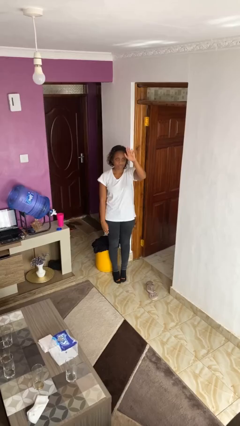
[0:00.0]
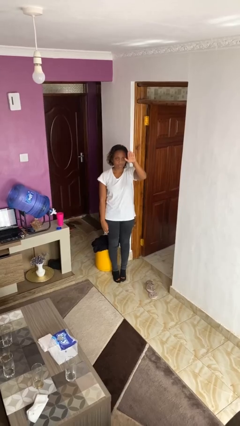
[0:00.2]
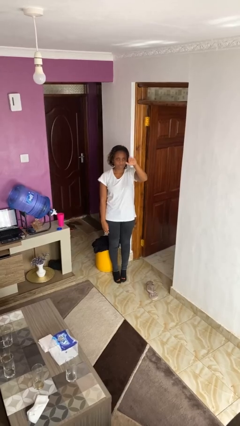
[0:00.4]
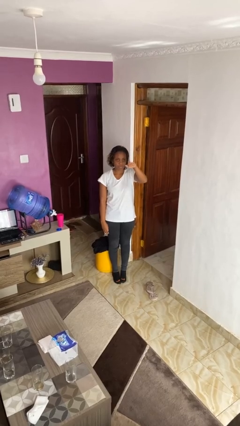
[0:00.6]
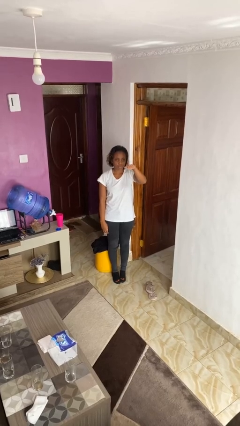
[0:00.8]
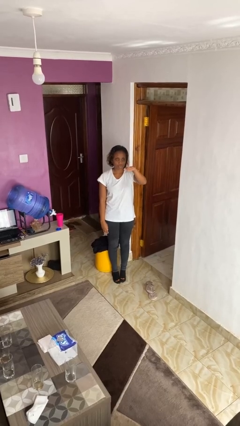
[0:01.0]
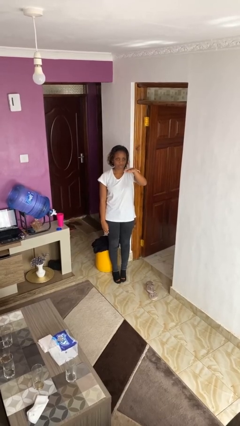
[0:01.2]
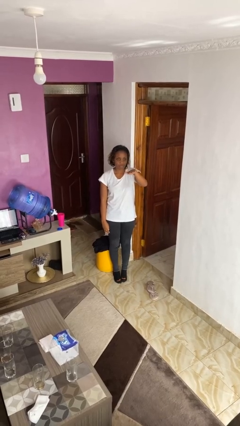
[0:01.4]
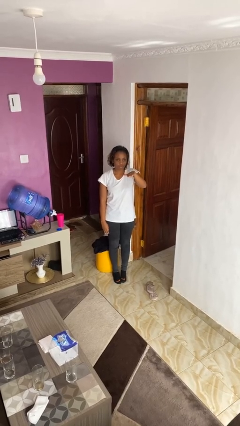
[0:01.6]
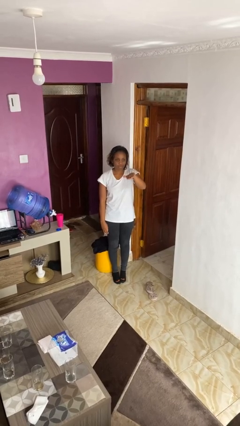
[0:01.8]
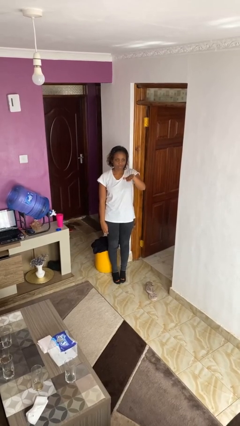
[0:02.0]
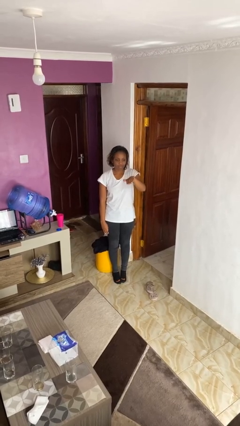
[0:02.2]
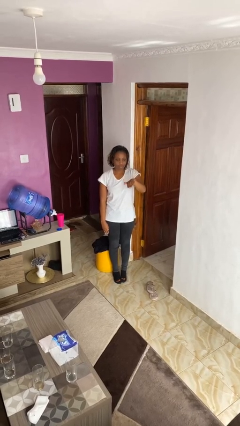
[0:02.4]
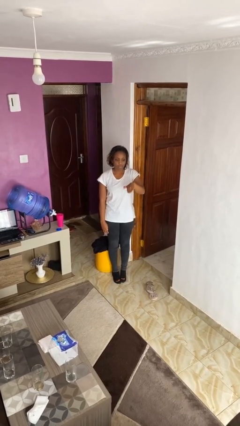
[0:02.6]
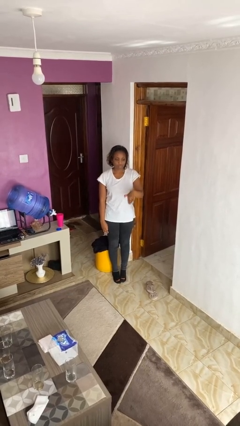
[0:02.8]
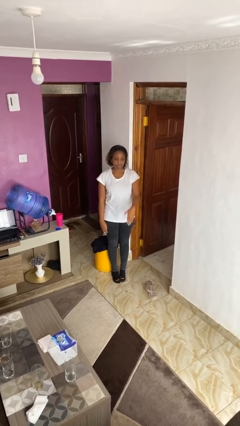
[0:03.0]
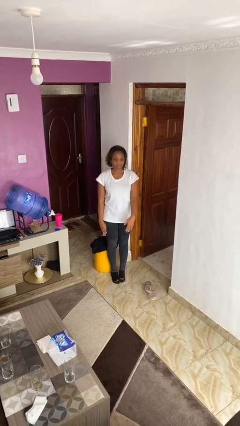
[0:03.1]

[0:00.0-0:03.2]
person gestures swipe down

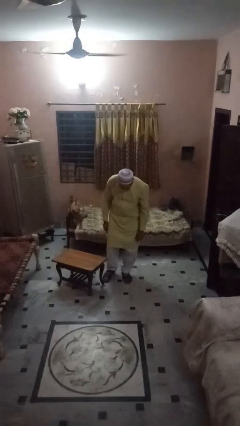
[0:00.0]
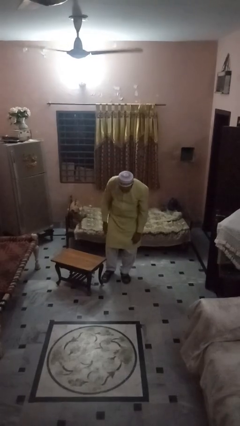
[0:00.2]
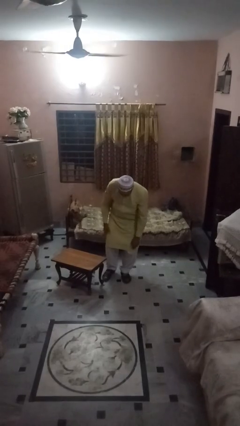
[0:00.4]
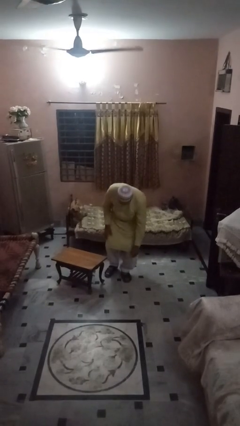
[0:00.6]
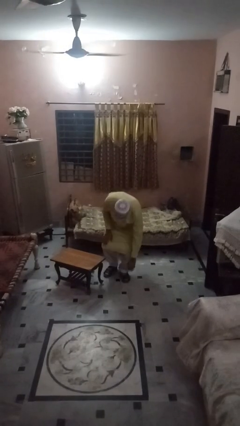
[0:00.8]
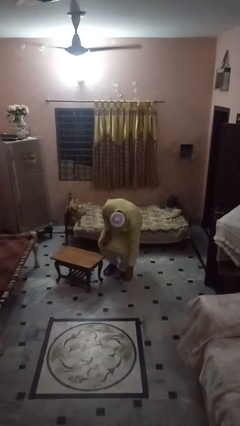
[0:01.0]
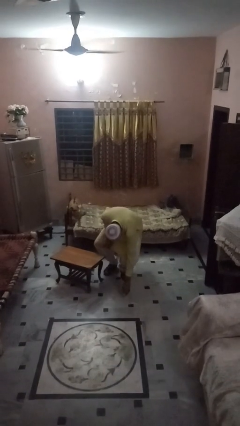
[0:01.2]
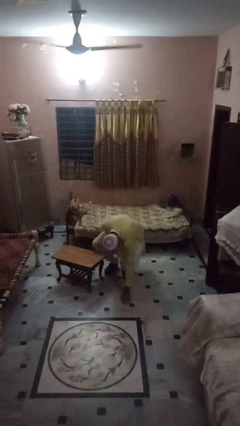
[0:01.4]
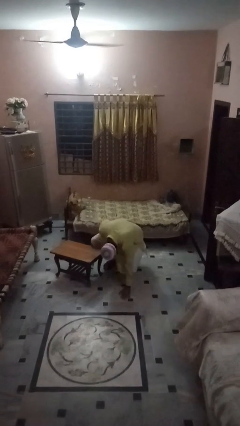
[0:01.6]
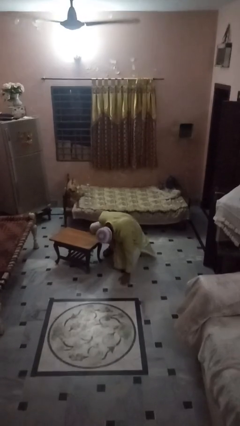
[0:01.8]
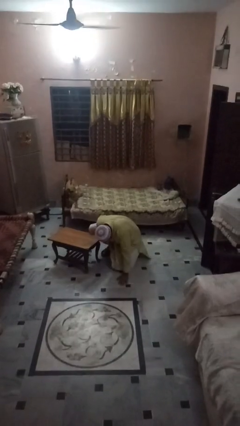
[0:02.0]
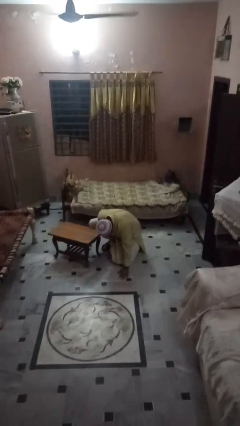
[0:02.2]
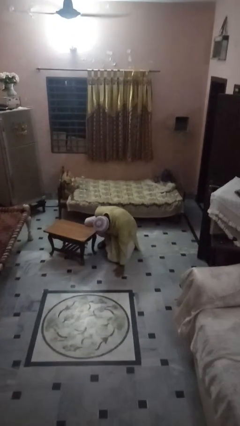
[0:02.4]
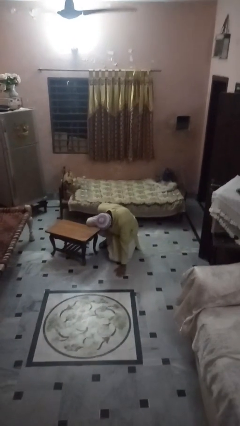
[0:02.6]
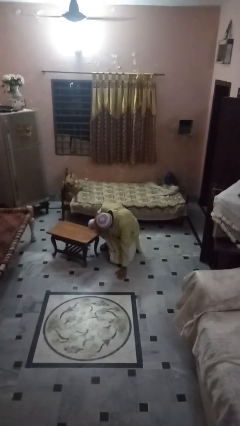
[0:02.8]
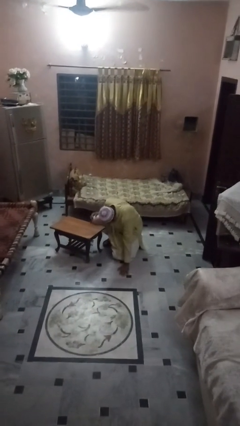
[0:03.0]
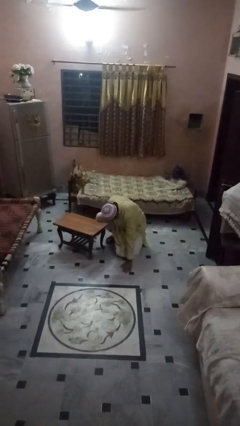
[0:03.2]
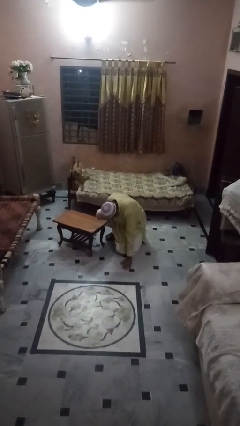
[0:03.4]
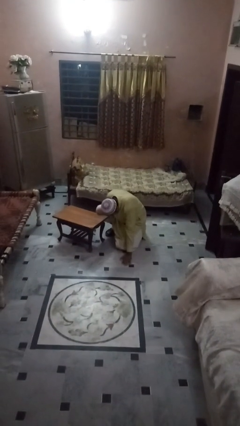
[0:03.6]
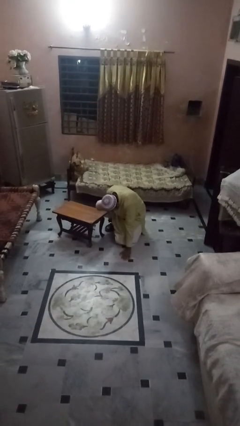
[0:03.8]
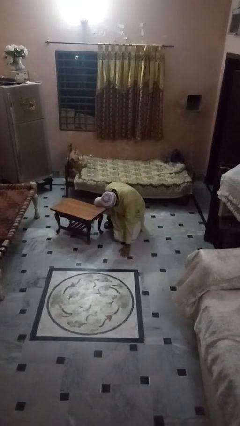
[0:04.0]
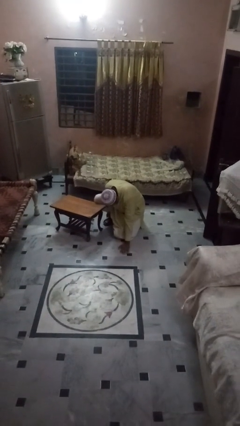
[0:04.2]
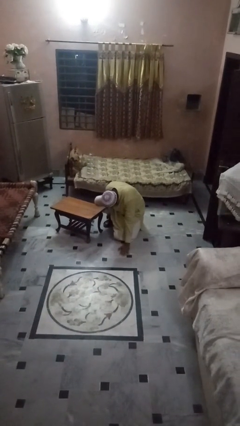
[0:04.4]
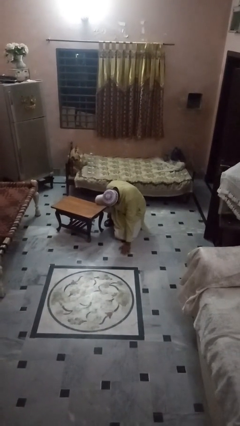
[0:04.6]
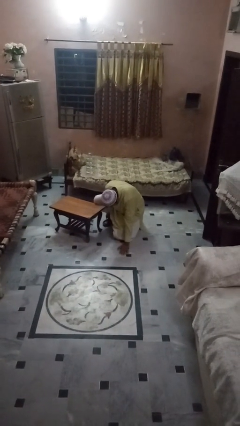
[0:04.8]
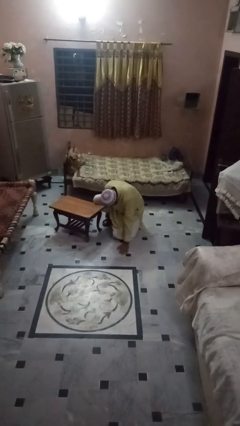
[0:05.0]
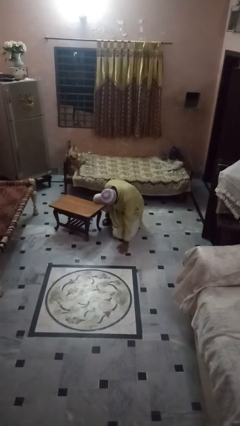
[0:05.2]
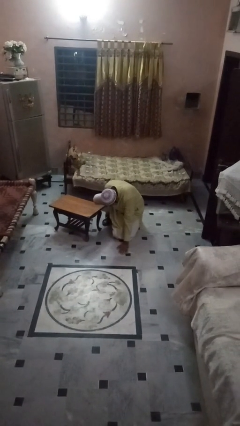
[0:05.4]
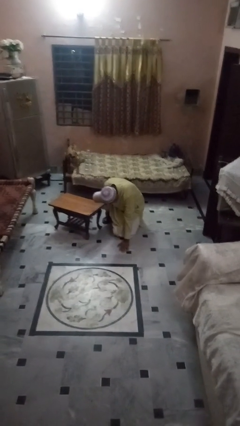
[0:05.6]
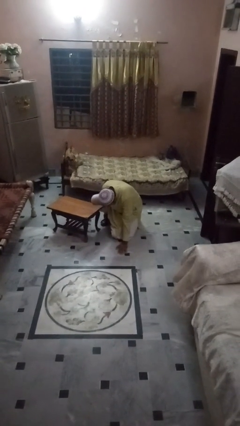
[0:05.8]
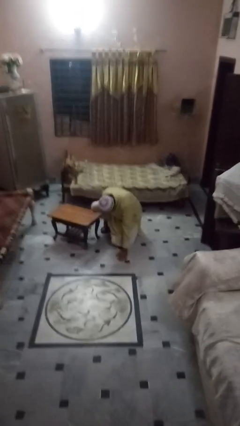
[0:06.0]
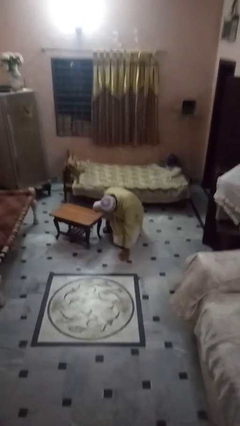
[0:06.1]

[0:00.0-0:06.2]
person lies down on floor

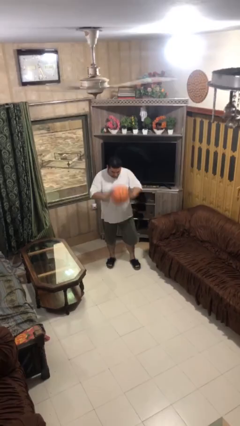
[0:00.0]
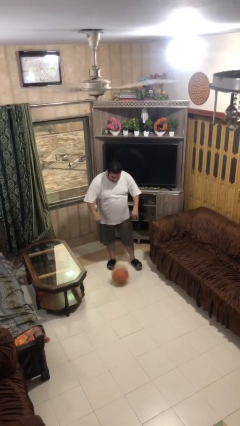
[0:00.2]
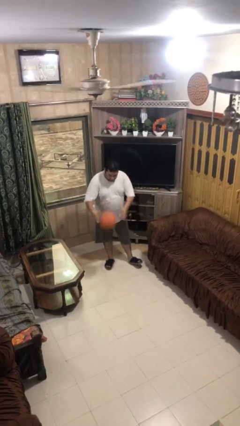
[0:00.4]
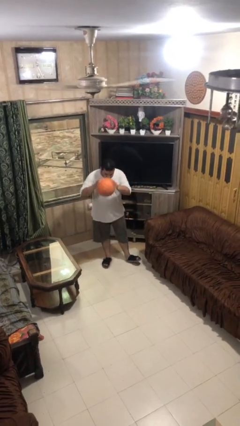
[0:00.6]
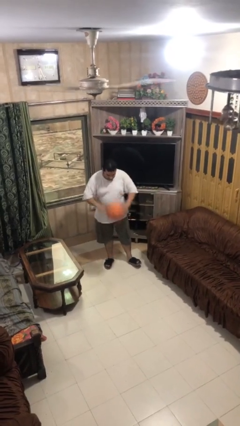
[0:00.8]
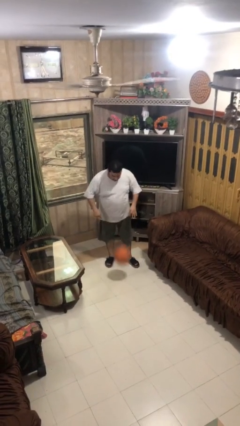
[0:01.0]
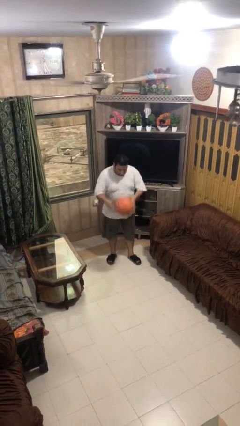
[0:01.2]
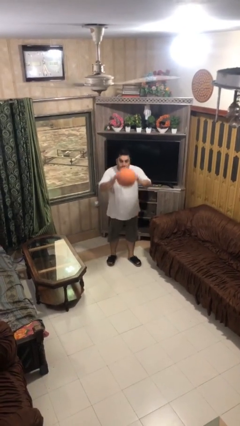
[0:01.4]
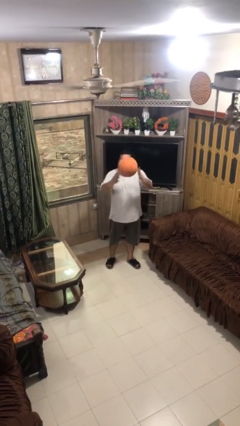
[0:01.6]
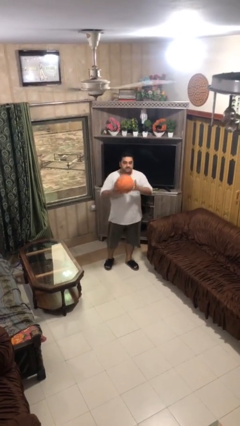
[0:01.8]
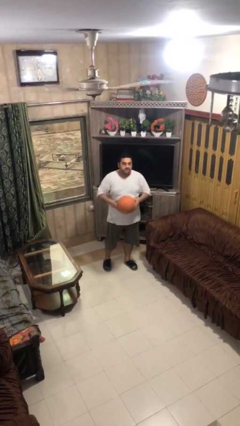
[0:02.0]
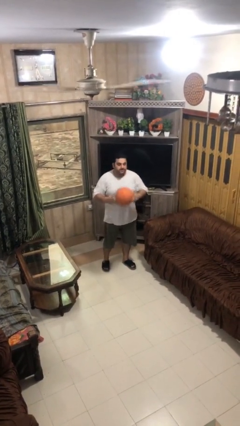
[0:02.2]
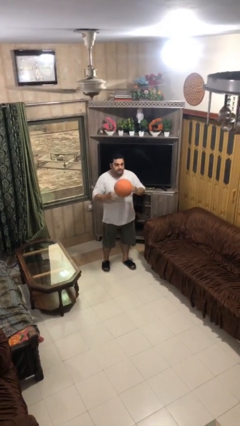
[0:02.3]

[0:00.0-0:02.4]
person bounces ball on floor

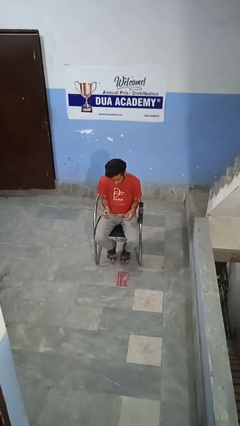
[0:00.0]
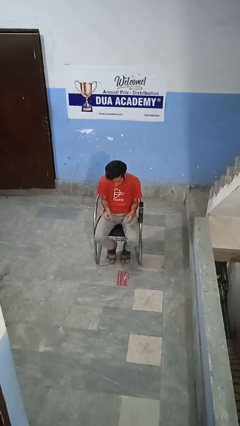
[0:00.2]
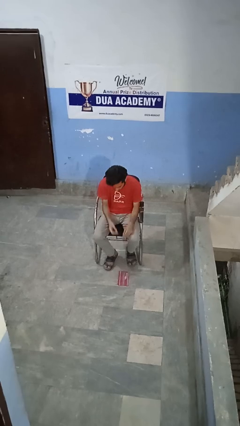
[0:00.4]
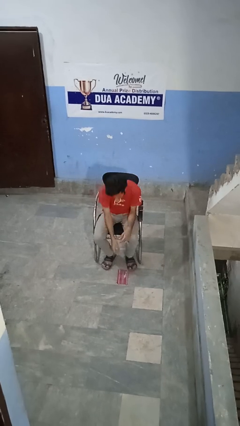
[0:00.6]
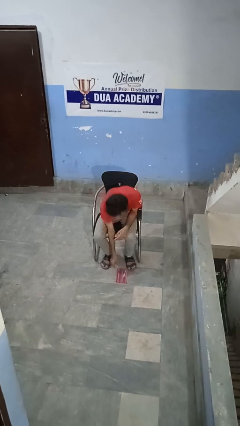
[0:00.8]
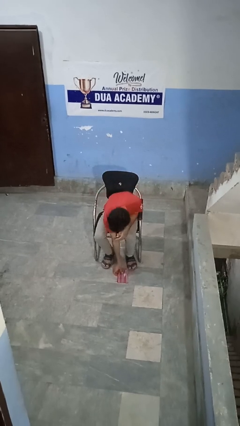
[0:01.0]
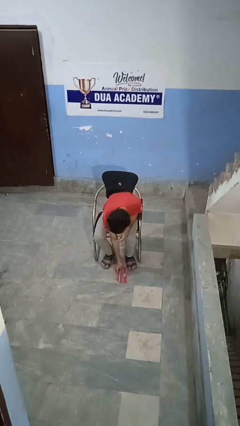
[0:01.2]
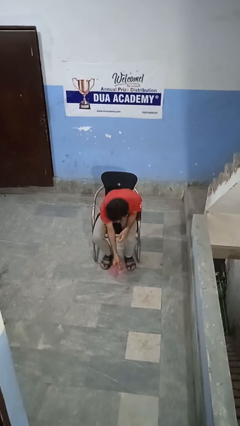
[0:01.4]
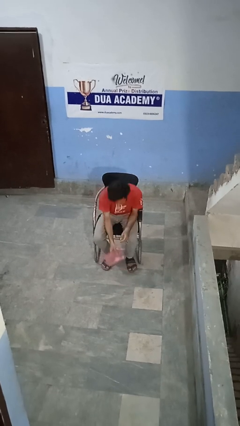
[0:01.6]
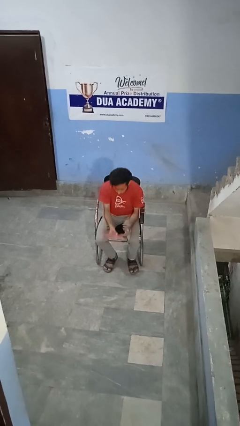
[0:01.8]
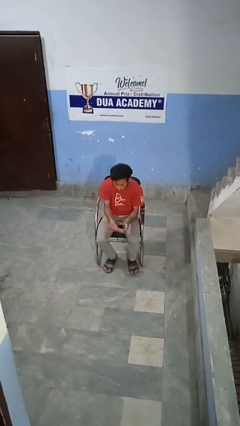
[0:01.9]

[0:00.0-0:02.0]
person picks up object from floor

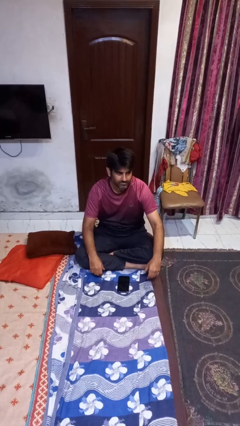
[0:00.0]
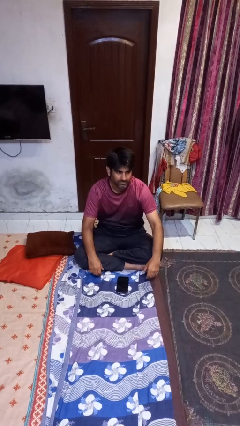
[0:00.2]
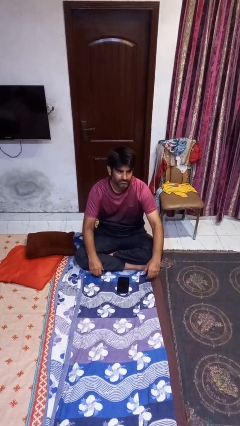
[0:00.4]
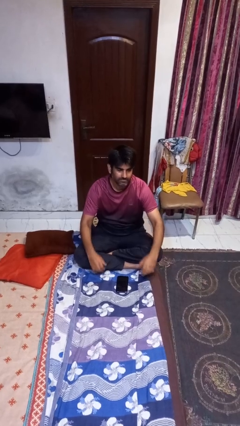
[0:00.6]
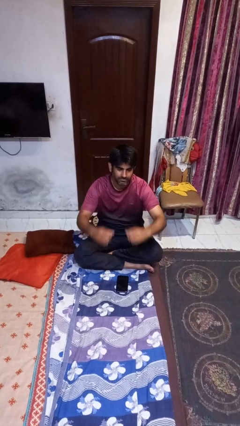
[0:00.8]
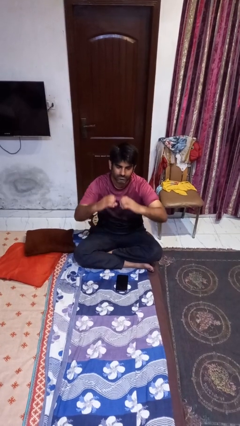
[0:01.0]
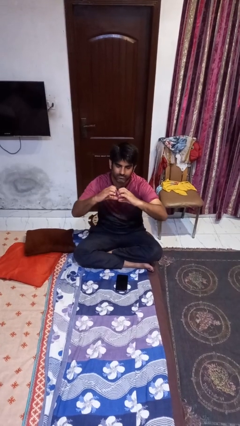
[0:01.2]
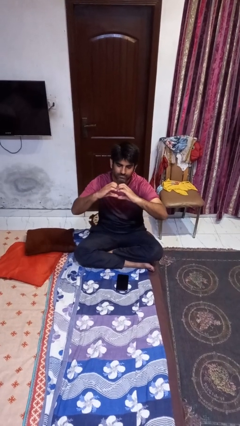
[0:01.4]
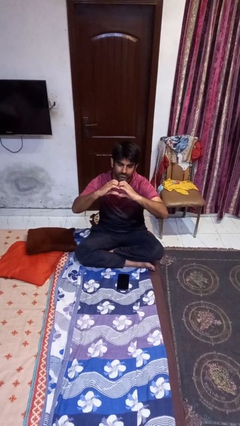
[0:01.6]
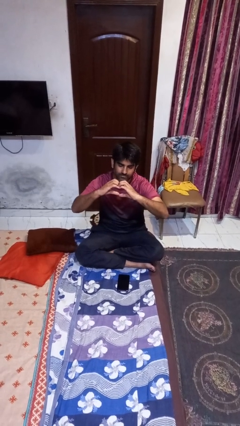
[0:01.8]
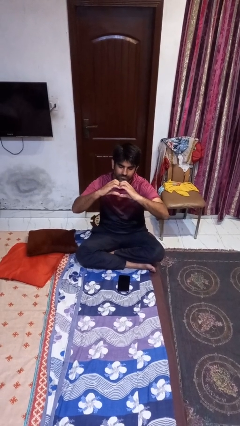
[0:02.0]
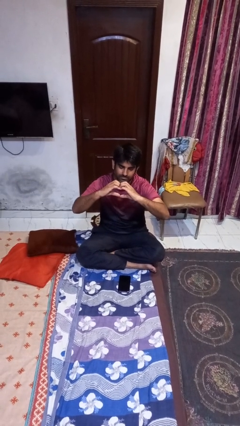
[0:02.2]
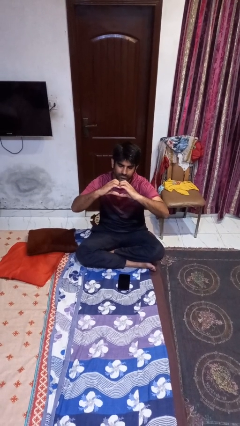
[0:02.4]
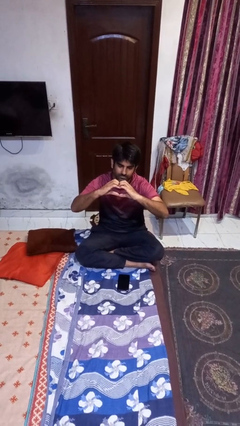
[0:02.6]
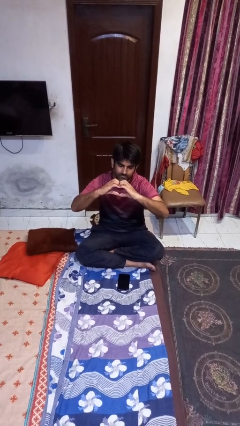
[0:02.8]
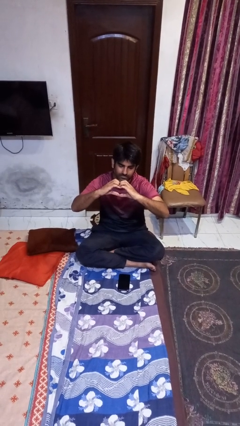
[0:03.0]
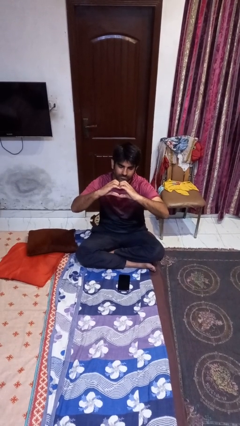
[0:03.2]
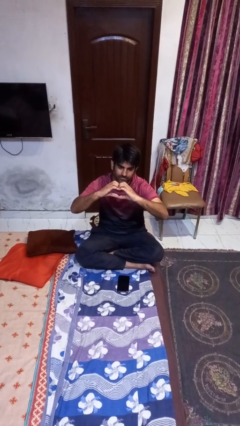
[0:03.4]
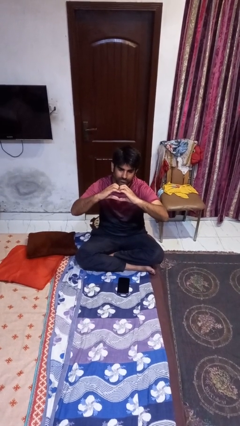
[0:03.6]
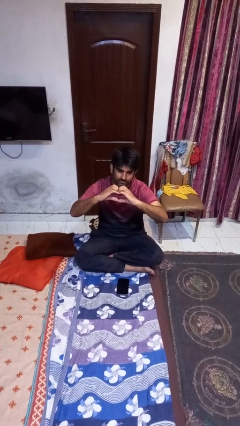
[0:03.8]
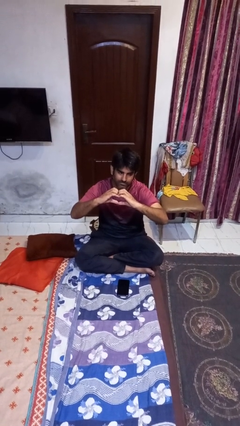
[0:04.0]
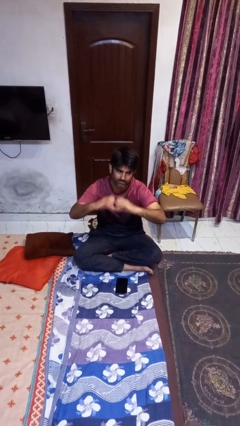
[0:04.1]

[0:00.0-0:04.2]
person gestures heart
